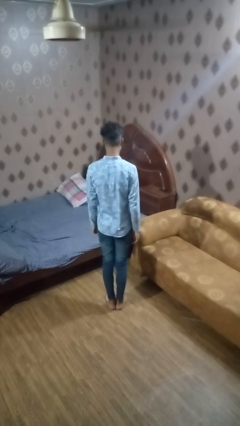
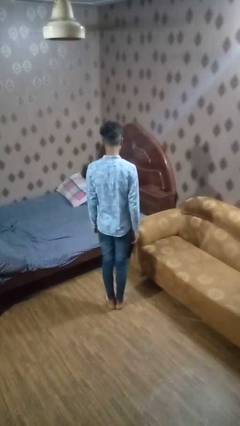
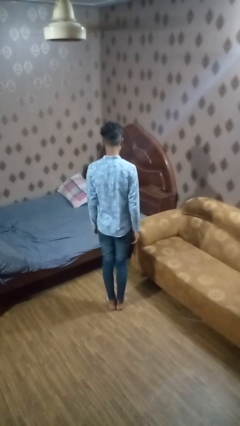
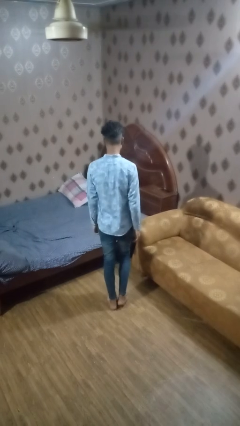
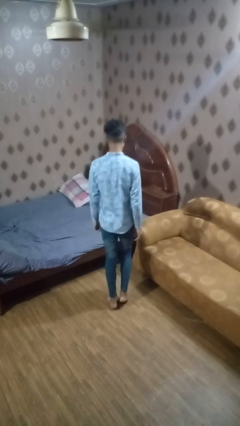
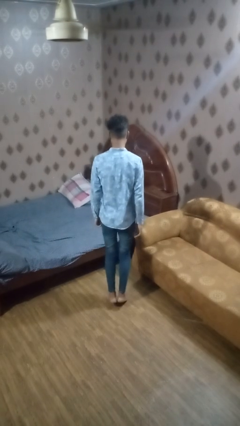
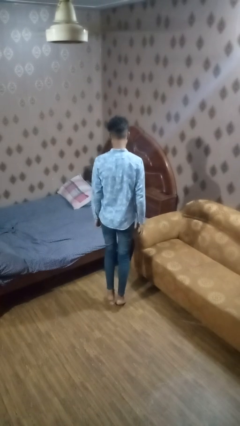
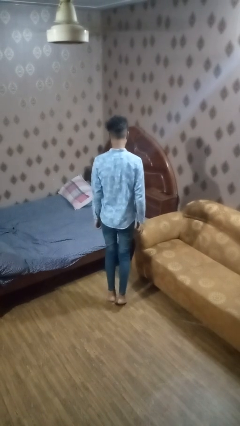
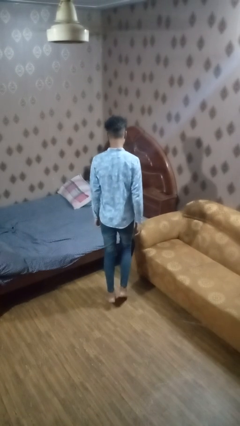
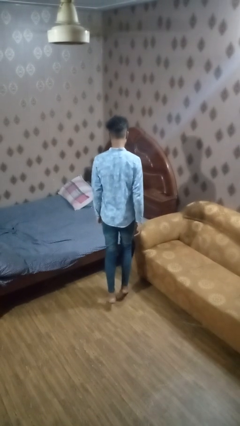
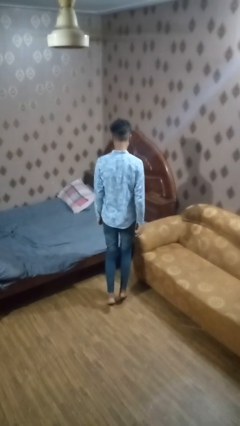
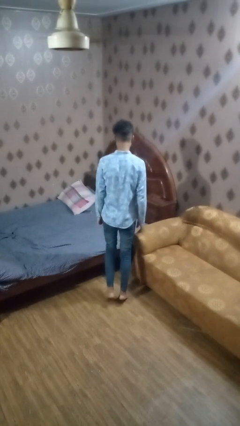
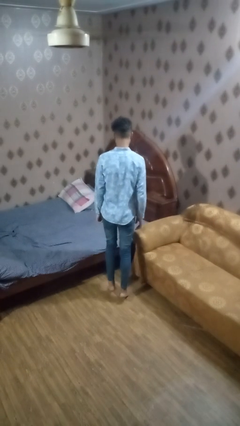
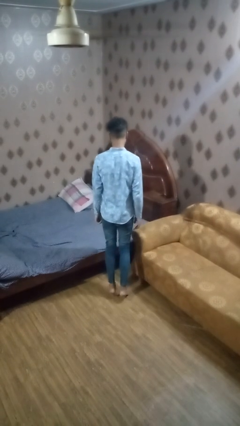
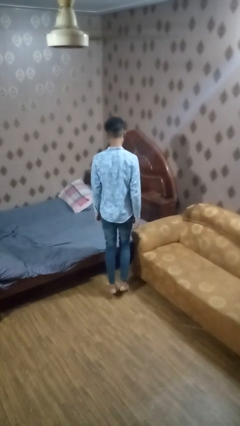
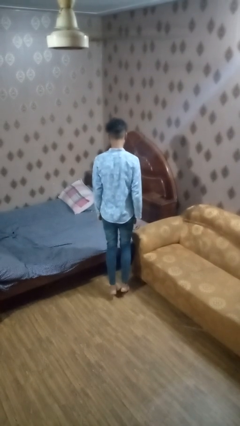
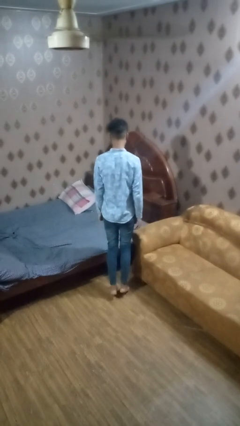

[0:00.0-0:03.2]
person walks tiptoe

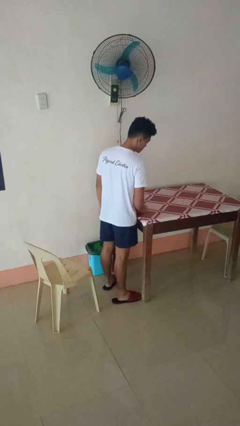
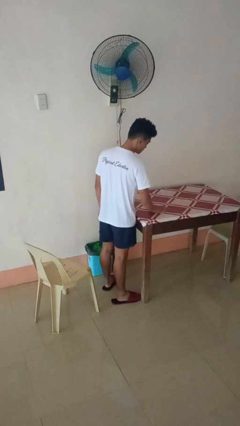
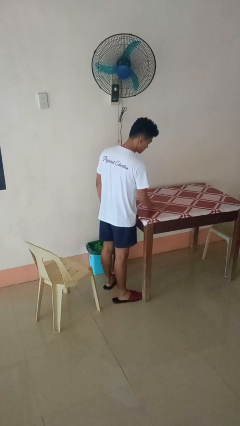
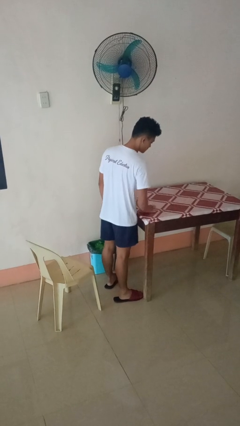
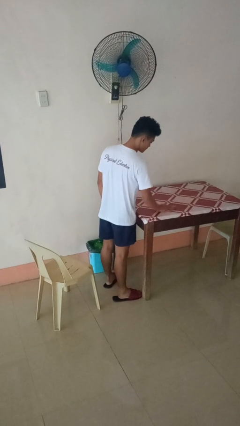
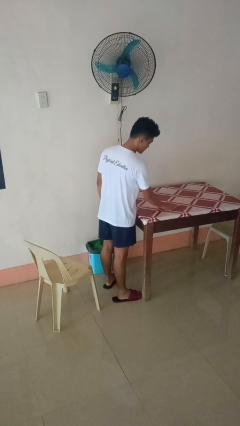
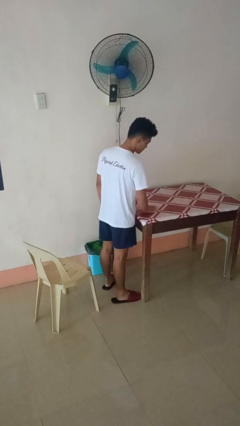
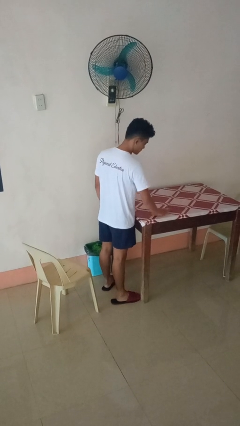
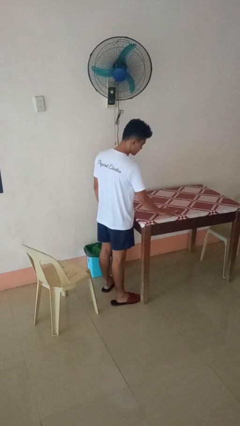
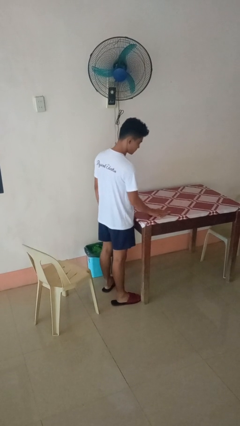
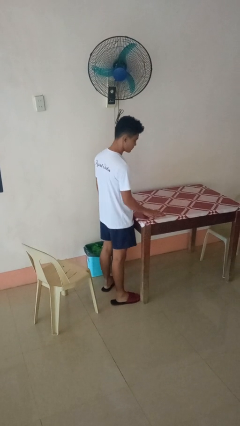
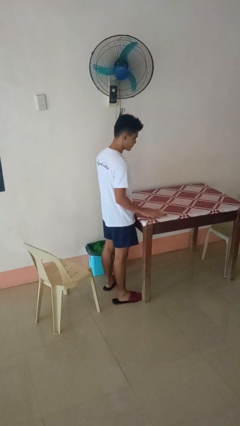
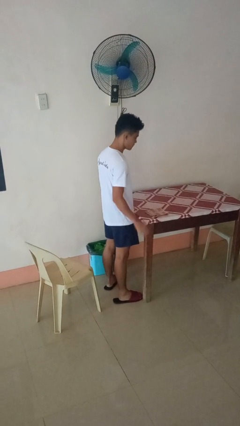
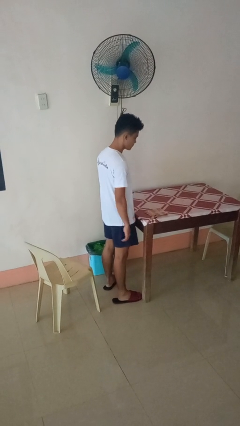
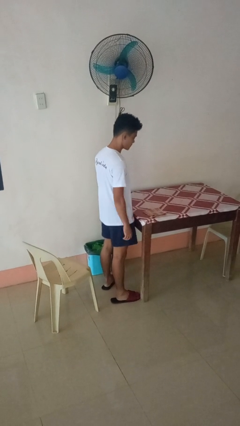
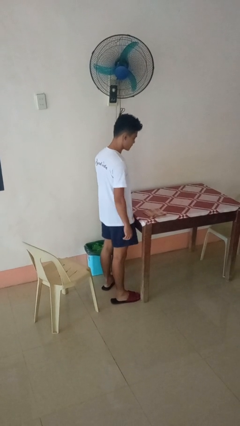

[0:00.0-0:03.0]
person cleans table with rag

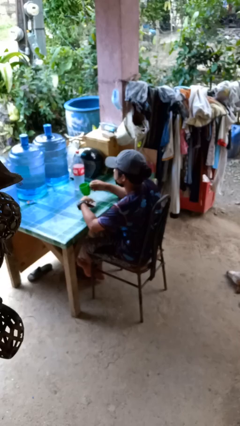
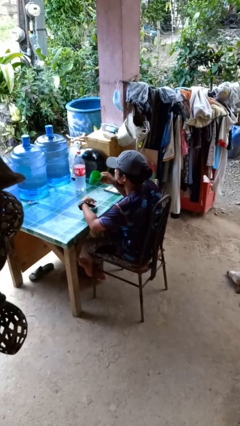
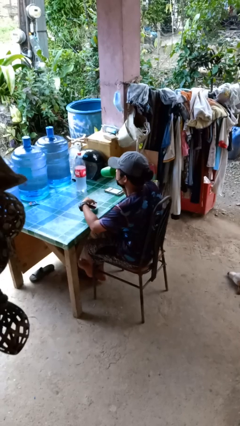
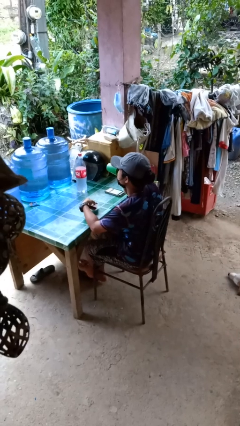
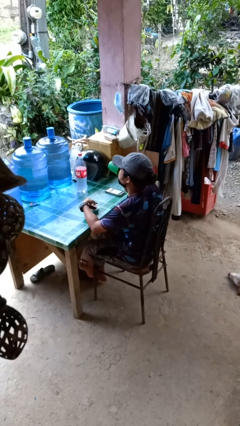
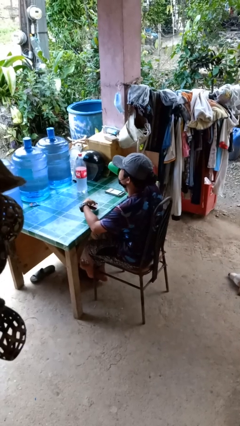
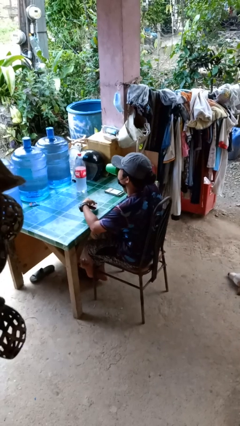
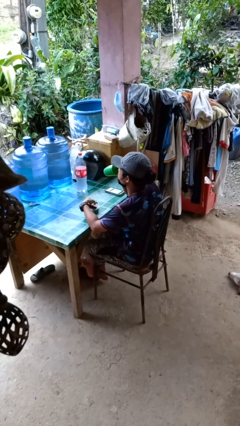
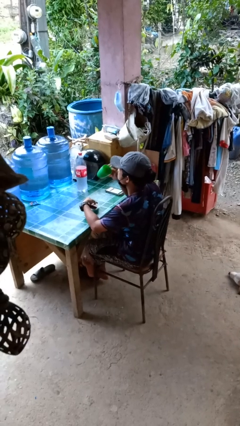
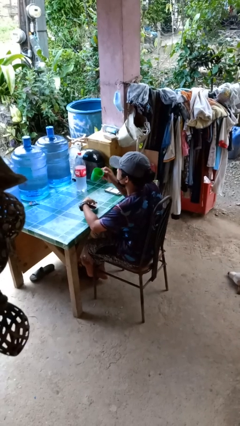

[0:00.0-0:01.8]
person drinks from cup

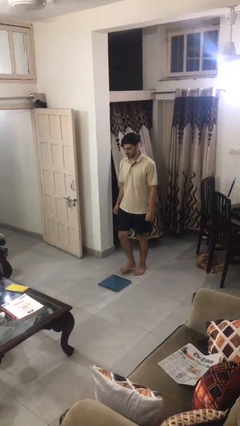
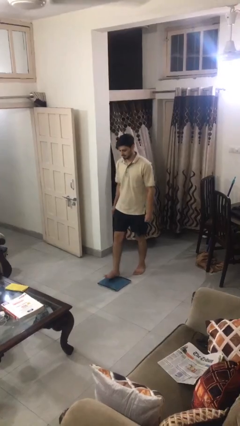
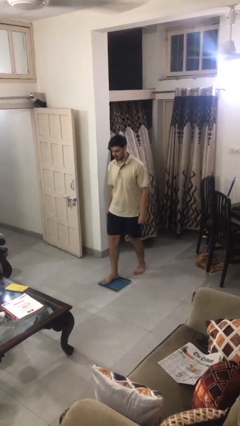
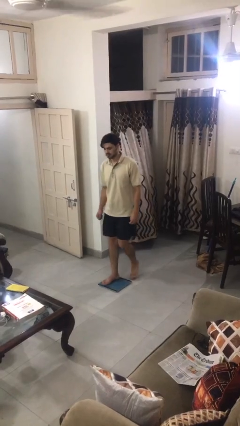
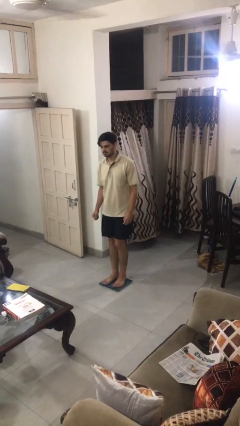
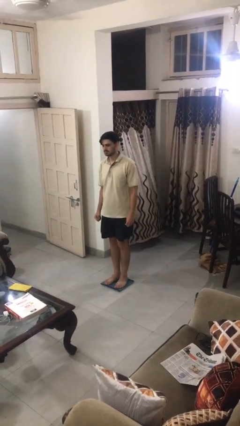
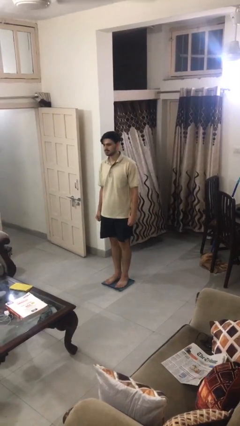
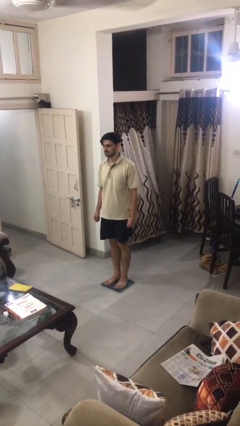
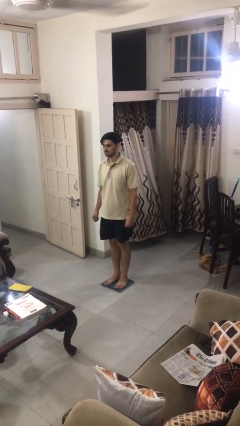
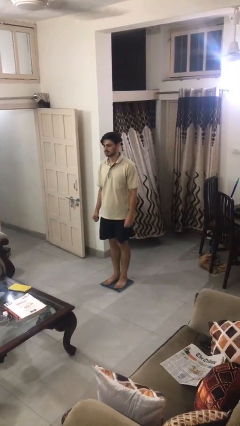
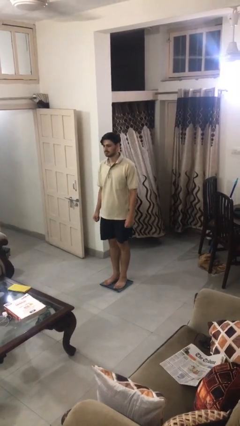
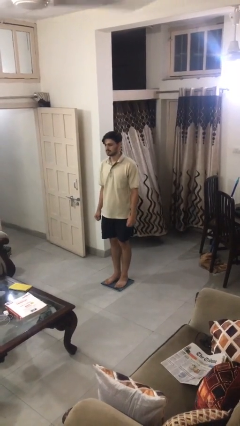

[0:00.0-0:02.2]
person uses bodyweight scale

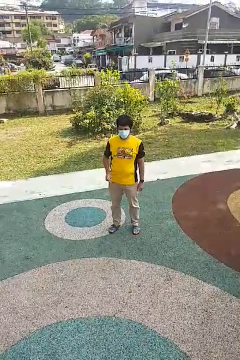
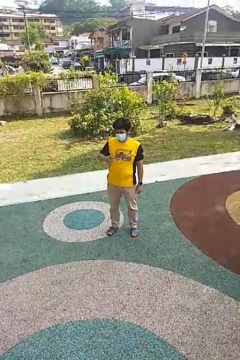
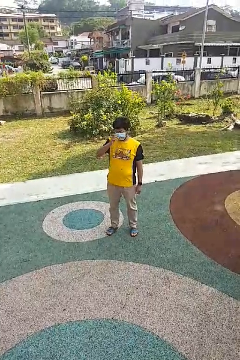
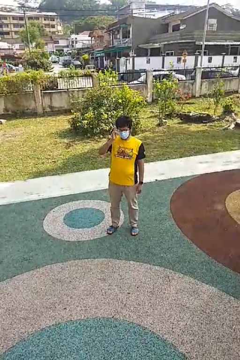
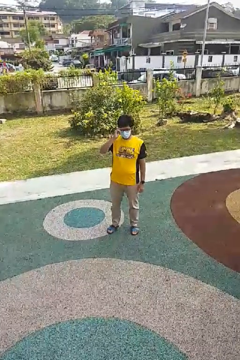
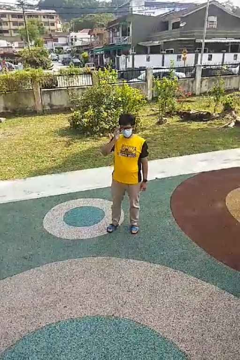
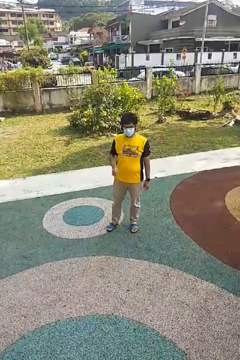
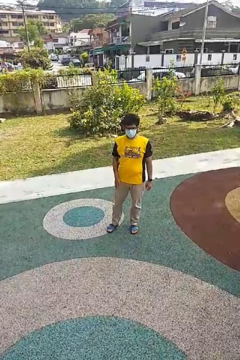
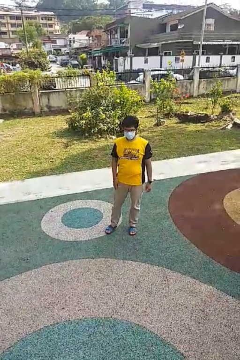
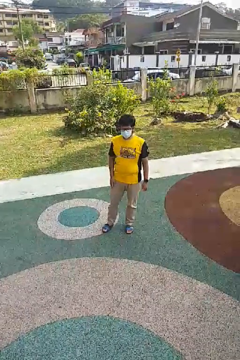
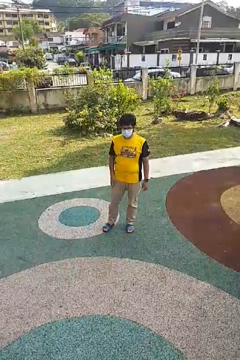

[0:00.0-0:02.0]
person puts on glasses

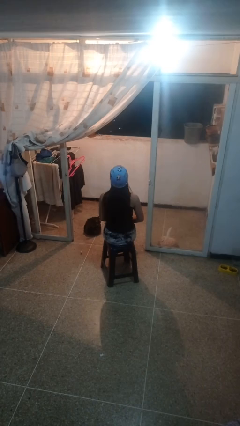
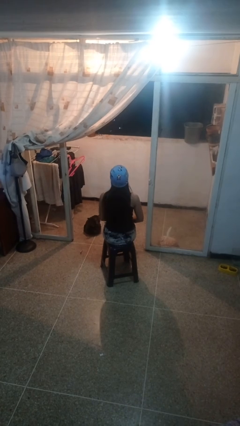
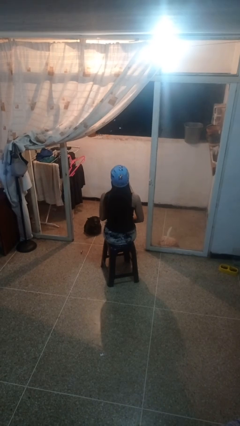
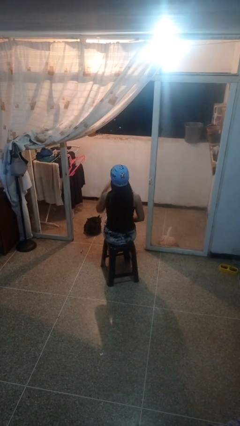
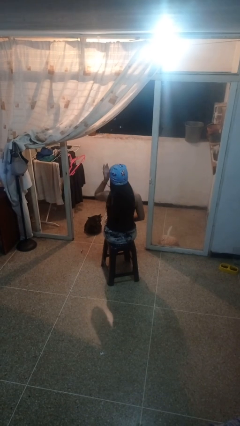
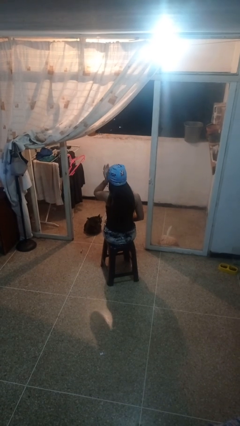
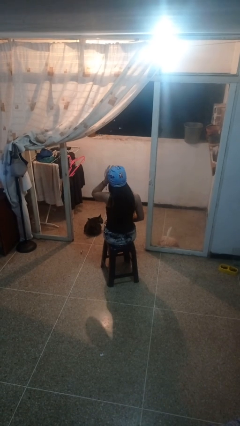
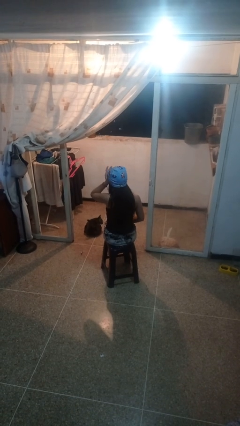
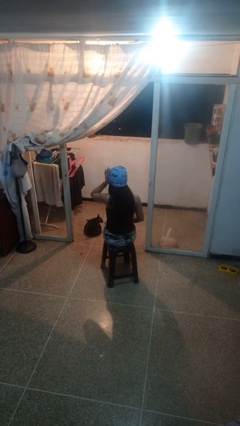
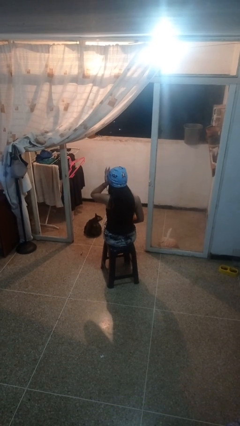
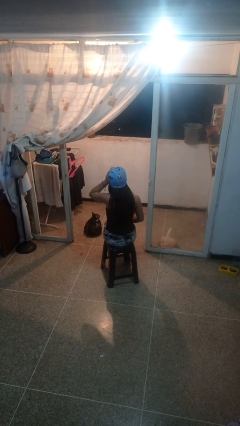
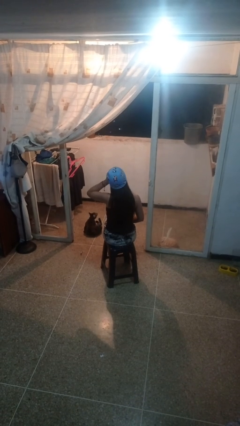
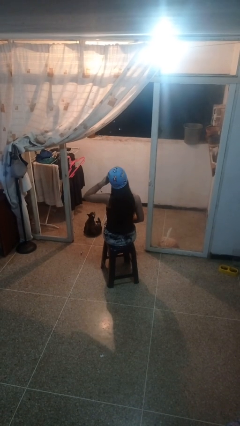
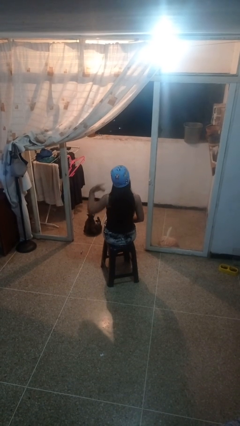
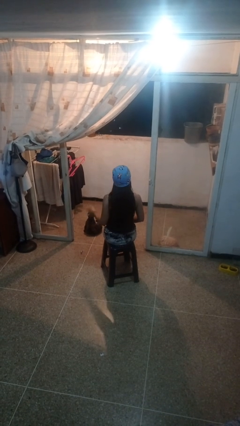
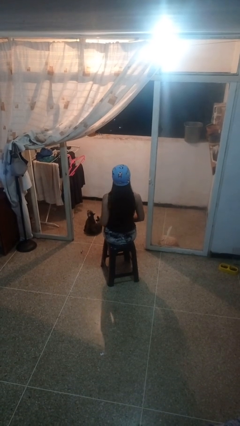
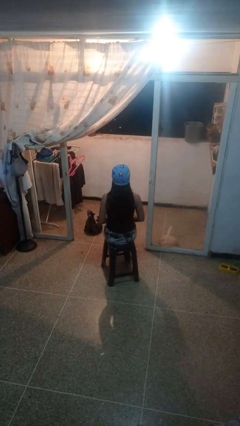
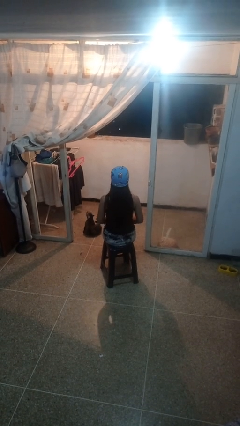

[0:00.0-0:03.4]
person rubs eyes

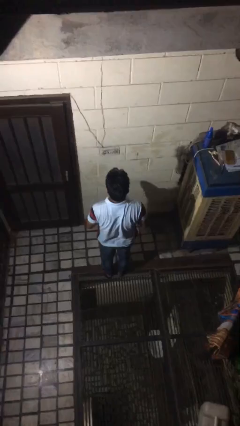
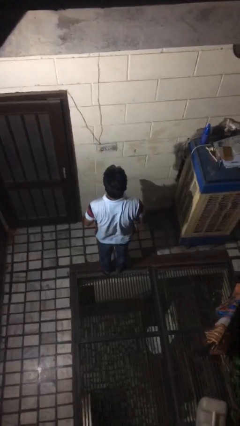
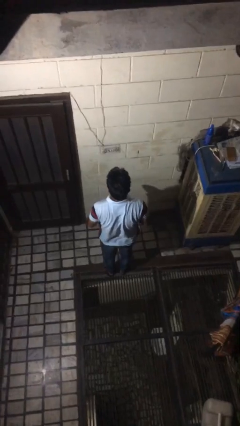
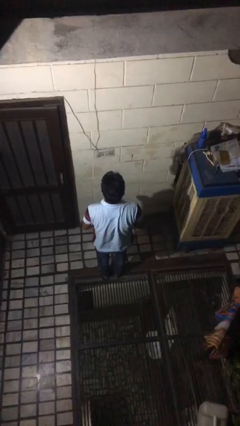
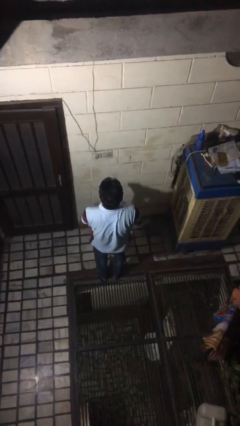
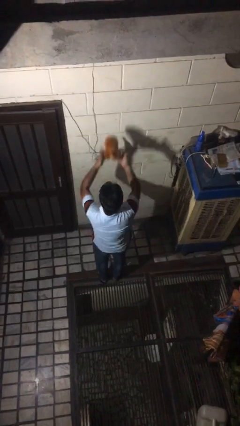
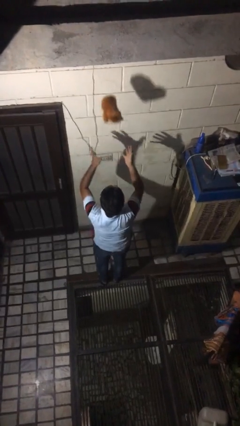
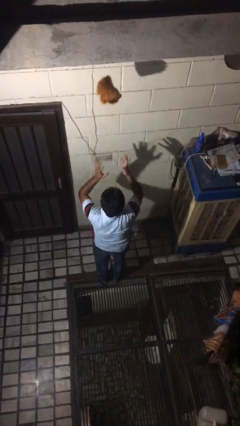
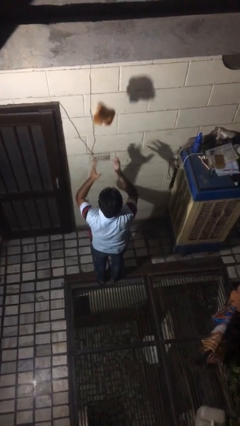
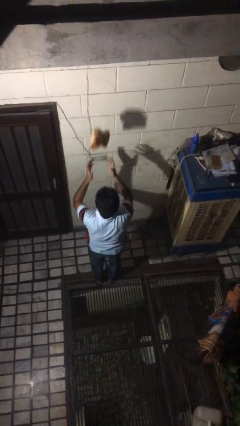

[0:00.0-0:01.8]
person drops object
